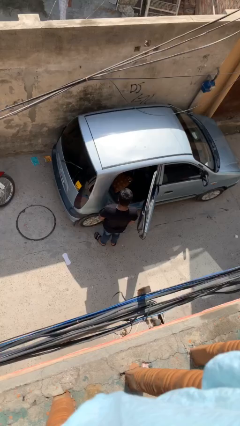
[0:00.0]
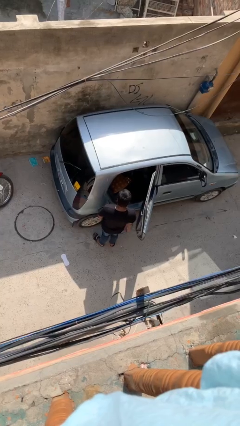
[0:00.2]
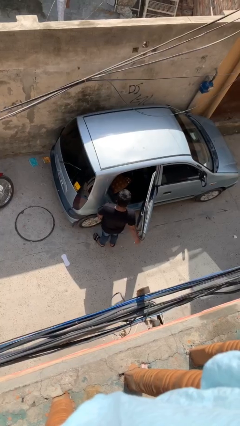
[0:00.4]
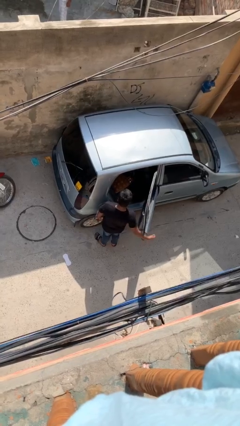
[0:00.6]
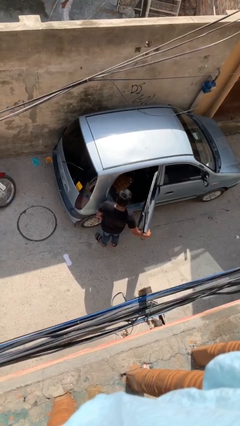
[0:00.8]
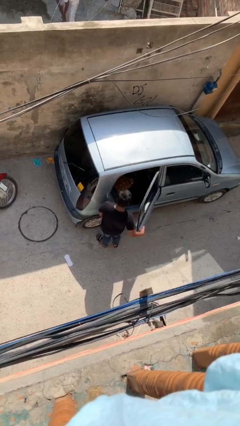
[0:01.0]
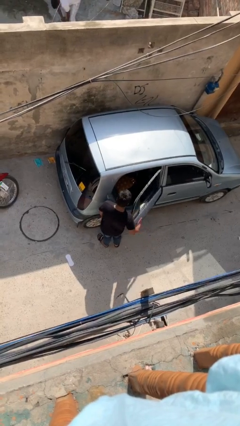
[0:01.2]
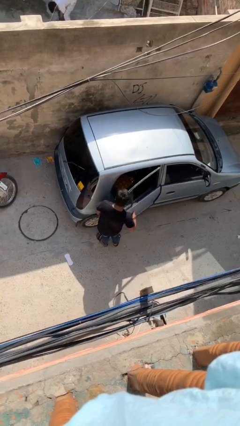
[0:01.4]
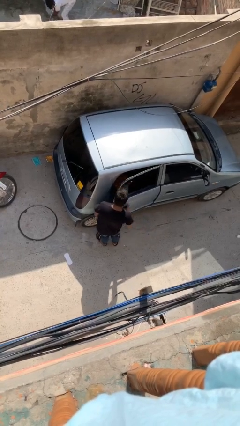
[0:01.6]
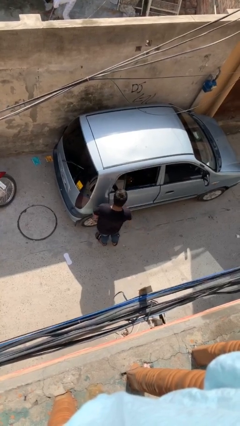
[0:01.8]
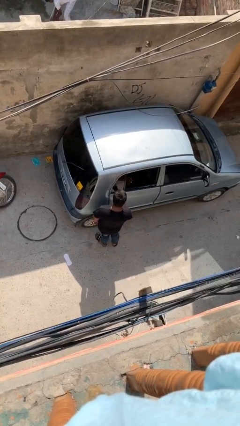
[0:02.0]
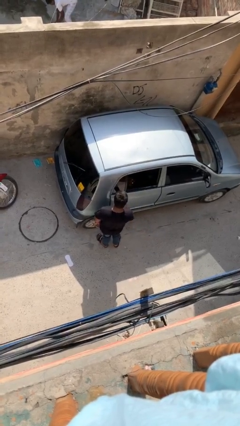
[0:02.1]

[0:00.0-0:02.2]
person closes car door

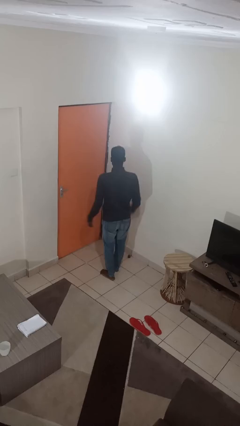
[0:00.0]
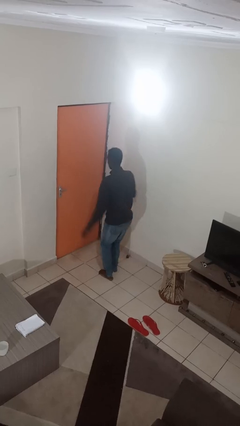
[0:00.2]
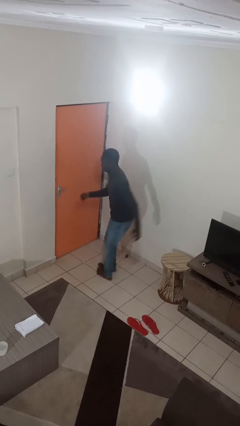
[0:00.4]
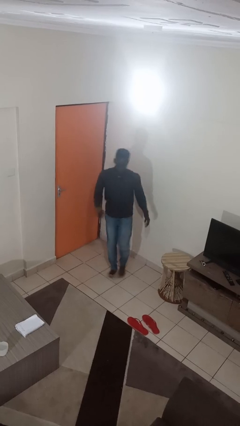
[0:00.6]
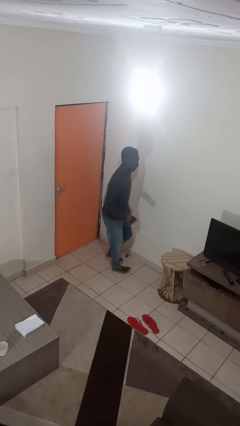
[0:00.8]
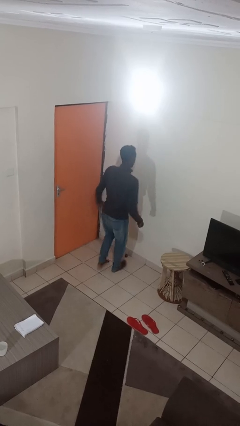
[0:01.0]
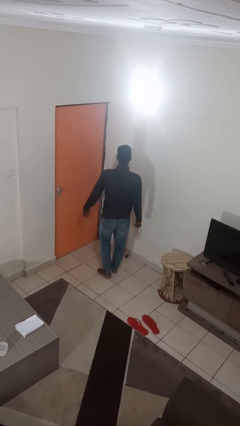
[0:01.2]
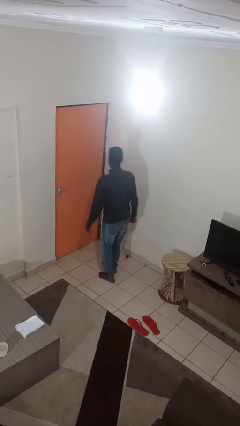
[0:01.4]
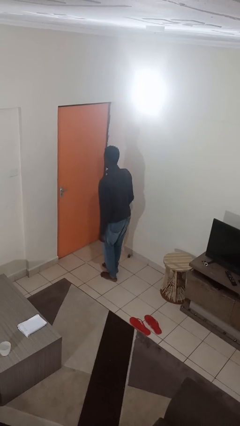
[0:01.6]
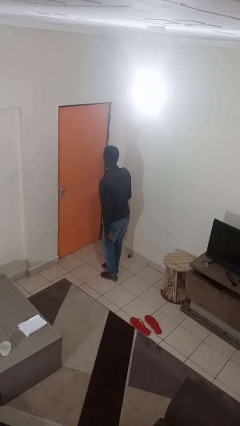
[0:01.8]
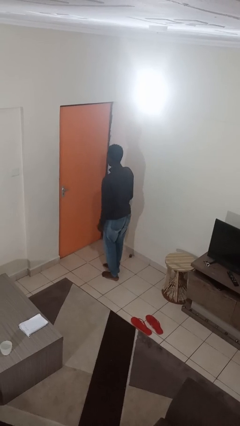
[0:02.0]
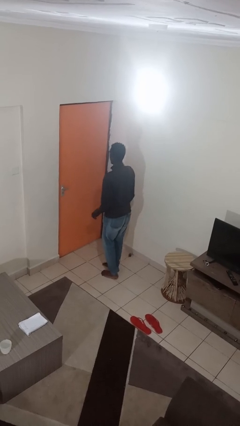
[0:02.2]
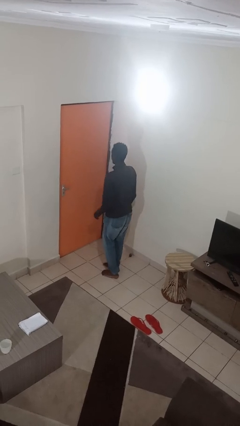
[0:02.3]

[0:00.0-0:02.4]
person twirls

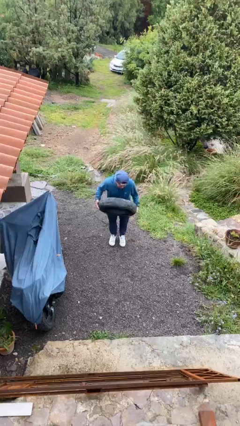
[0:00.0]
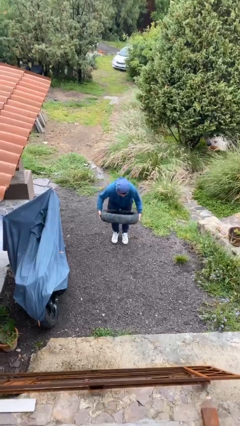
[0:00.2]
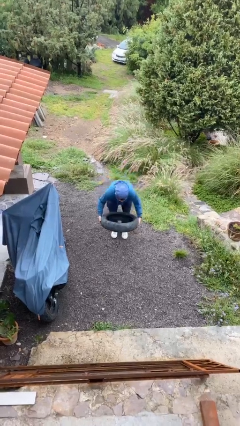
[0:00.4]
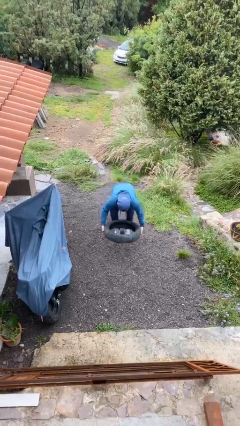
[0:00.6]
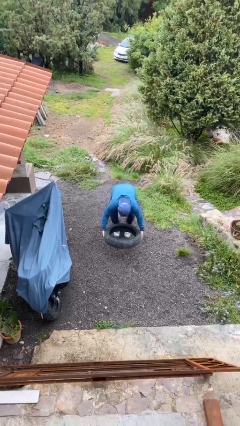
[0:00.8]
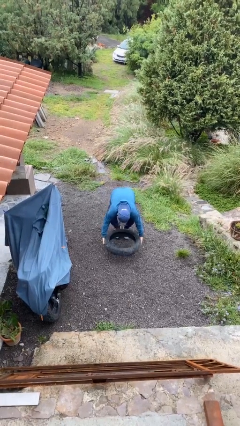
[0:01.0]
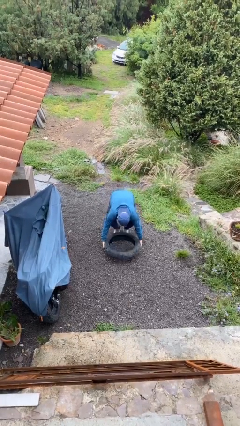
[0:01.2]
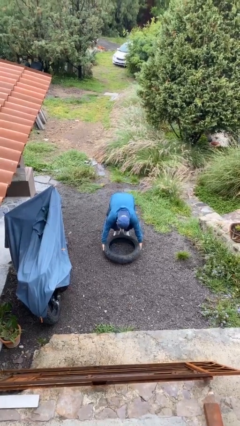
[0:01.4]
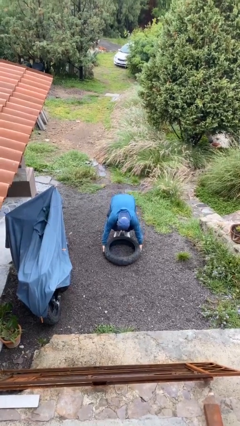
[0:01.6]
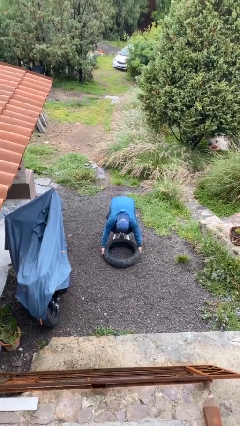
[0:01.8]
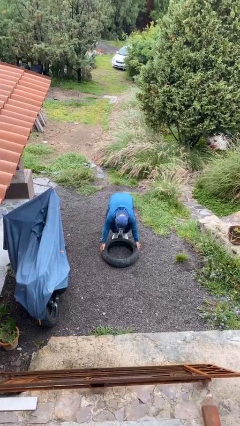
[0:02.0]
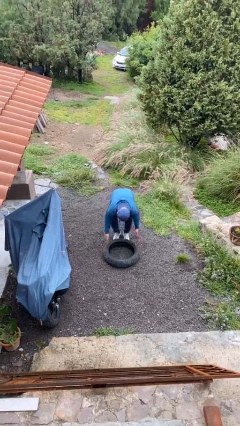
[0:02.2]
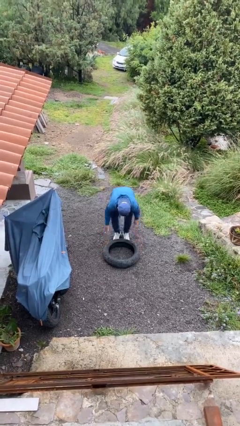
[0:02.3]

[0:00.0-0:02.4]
person puts down object on floor

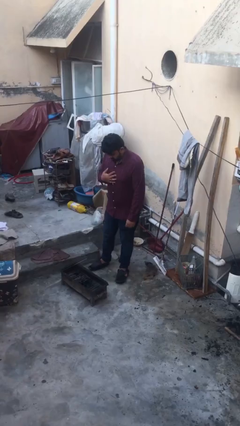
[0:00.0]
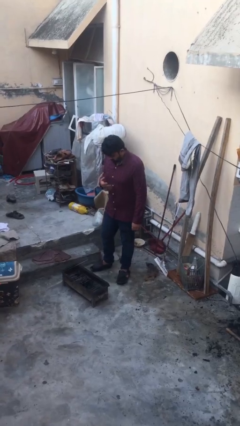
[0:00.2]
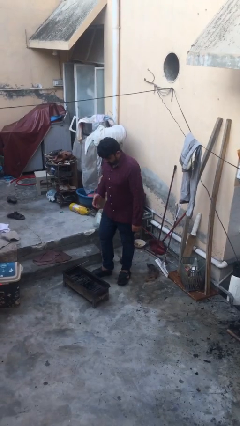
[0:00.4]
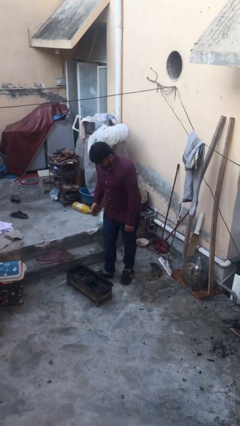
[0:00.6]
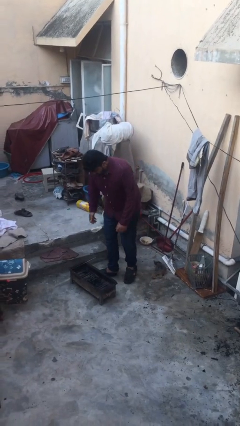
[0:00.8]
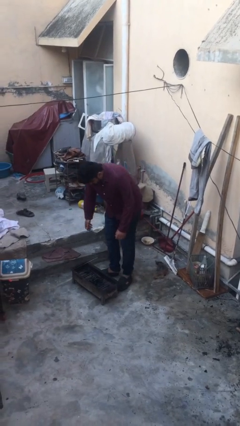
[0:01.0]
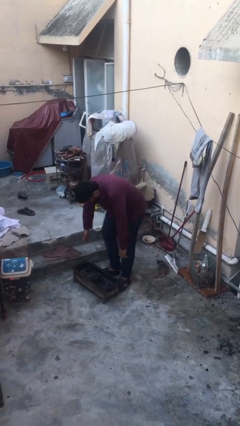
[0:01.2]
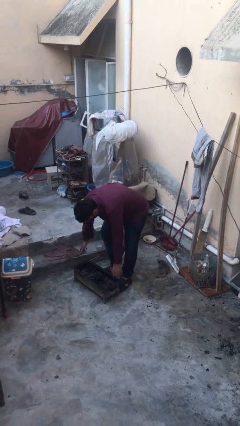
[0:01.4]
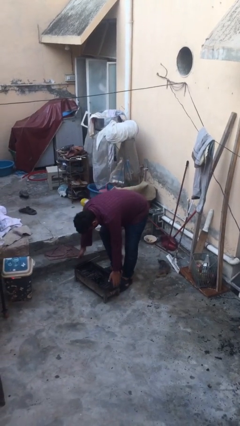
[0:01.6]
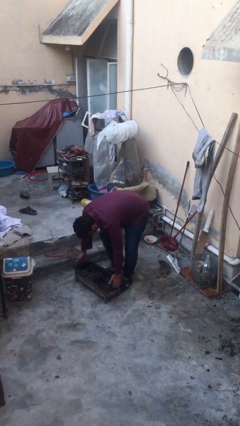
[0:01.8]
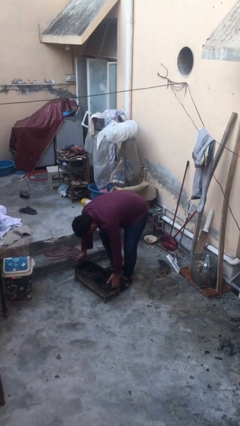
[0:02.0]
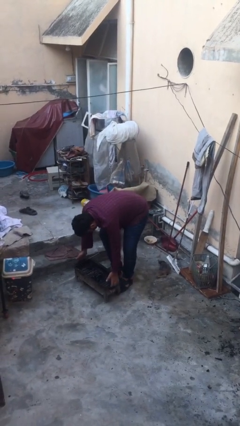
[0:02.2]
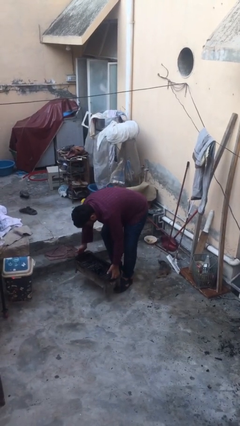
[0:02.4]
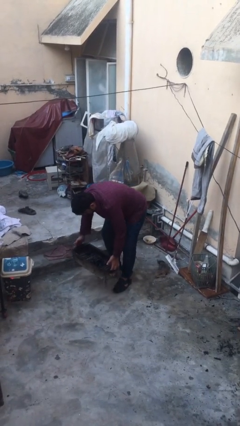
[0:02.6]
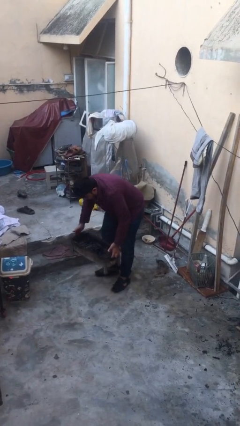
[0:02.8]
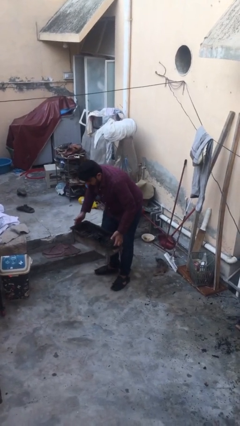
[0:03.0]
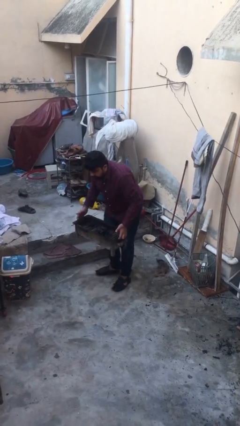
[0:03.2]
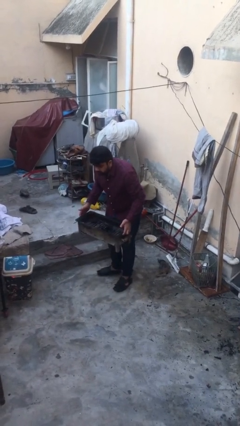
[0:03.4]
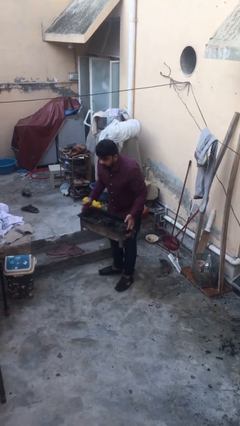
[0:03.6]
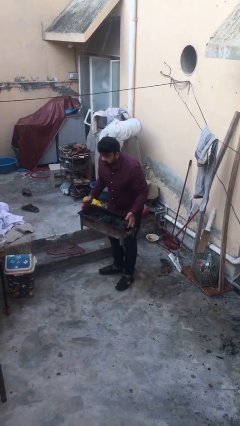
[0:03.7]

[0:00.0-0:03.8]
person picks up object from floor

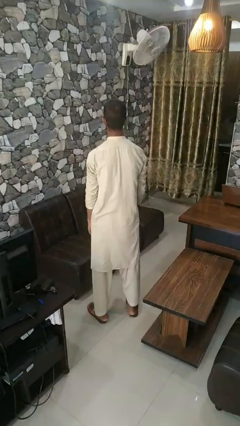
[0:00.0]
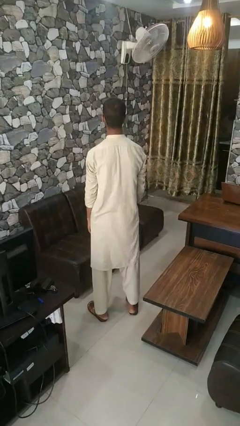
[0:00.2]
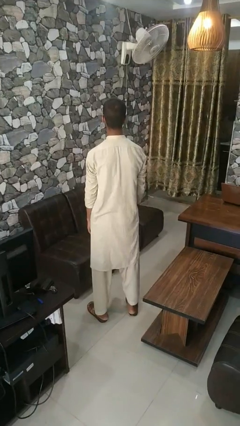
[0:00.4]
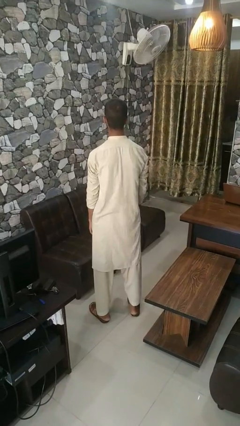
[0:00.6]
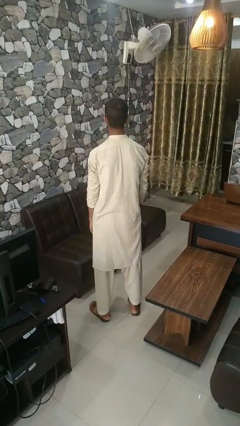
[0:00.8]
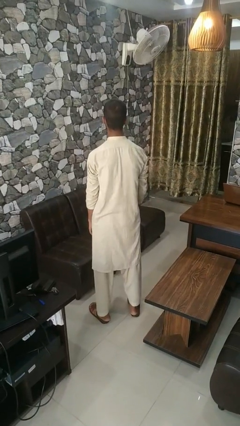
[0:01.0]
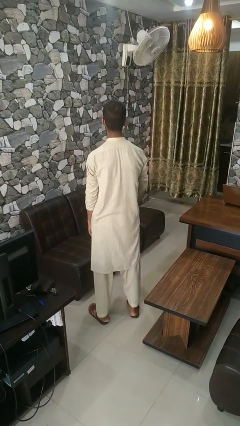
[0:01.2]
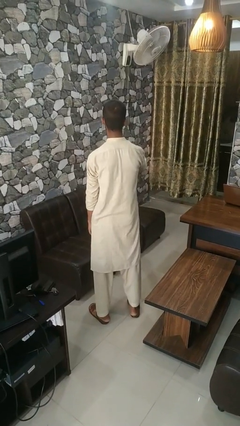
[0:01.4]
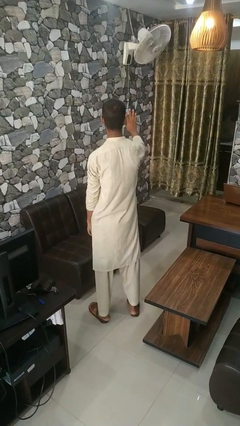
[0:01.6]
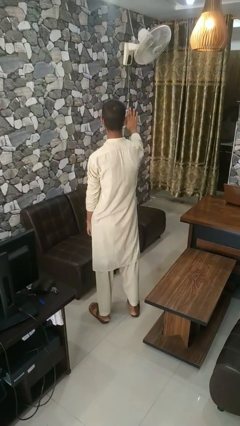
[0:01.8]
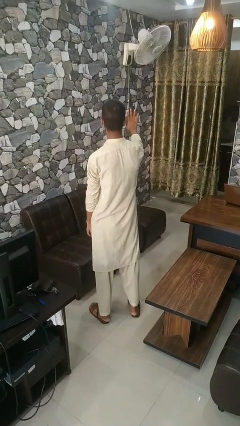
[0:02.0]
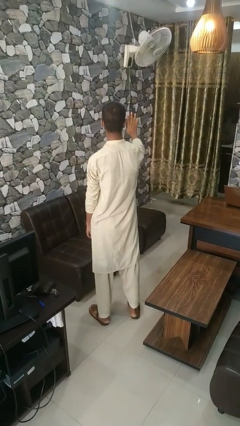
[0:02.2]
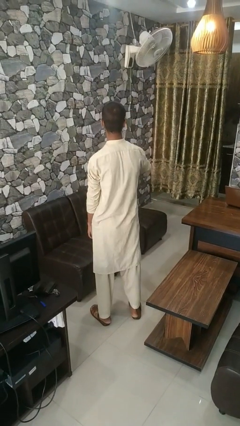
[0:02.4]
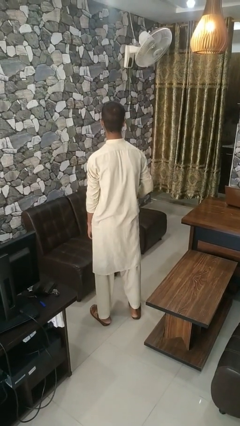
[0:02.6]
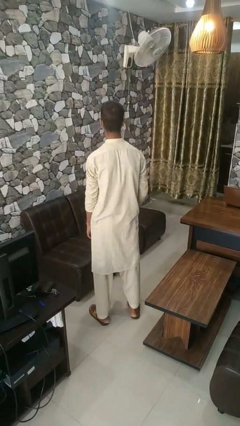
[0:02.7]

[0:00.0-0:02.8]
person gestures number four

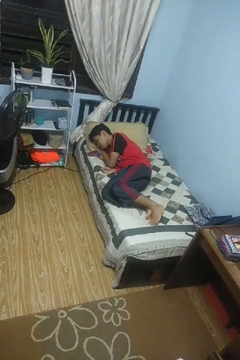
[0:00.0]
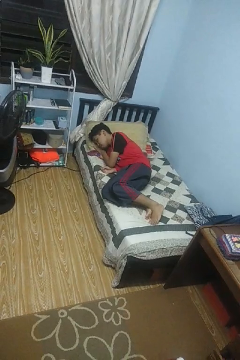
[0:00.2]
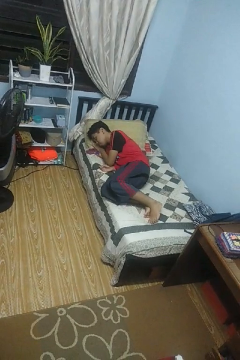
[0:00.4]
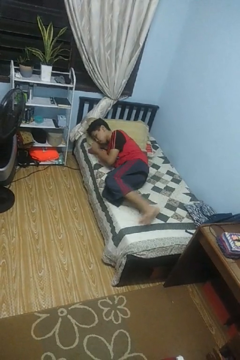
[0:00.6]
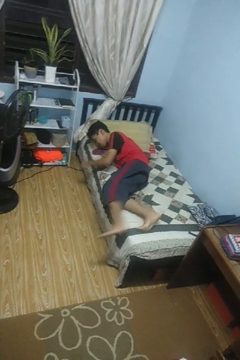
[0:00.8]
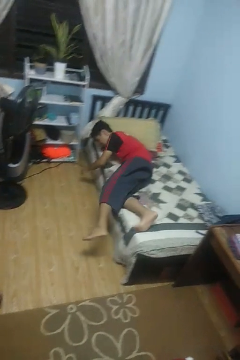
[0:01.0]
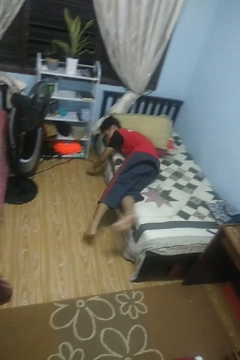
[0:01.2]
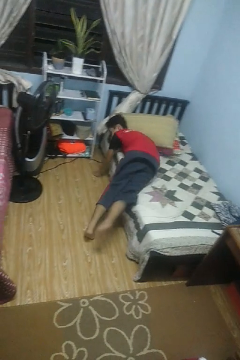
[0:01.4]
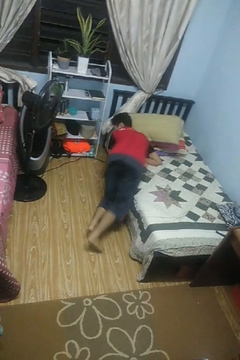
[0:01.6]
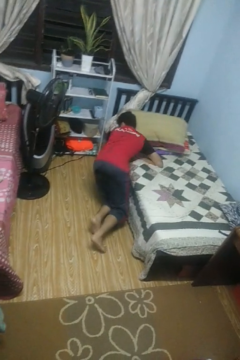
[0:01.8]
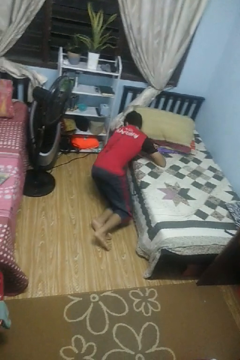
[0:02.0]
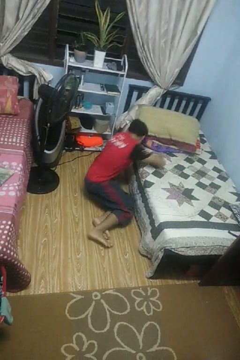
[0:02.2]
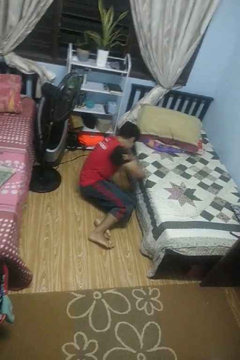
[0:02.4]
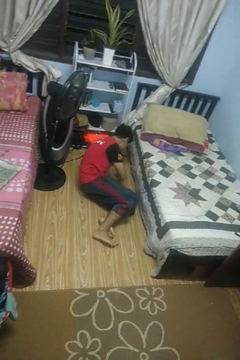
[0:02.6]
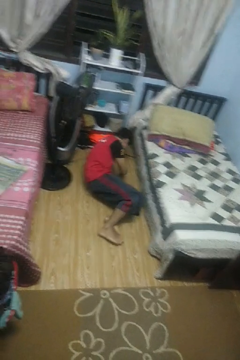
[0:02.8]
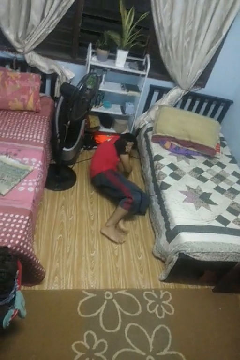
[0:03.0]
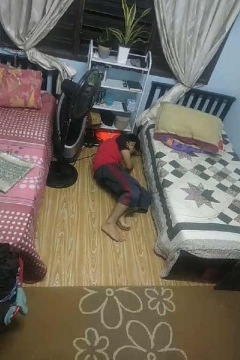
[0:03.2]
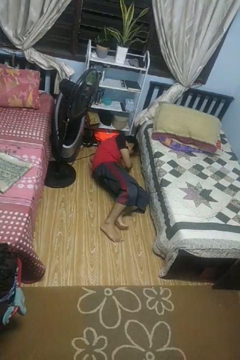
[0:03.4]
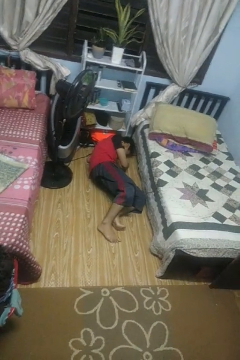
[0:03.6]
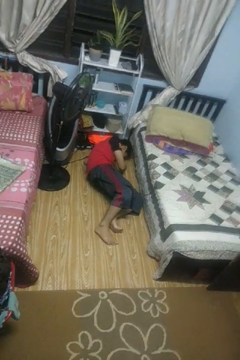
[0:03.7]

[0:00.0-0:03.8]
person falls from bed

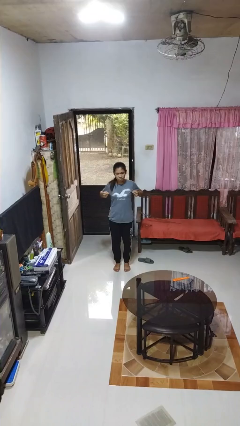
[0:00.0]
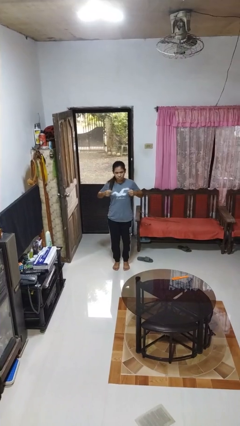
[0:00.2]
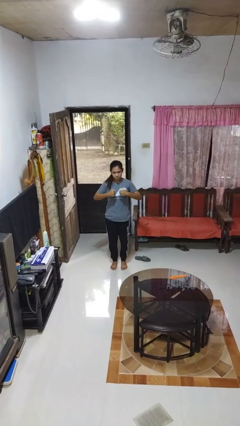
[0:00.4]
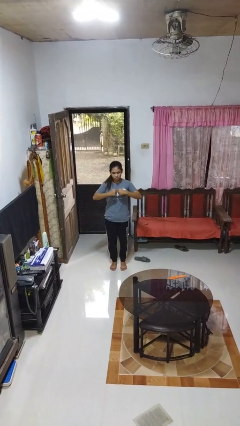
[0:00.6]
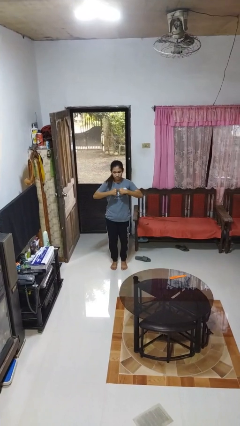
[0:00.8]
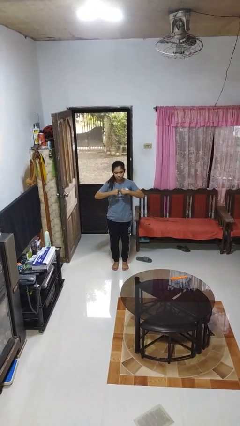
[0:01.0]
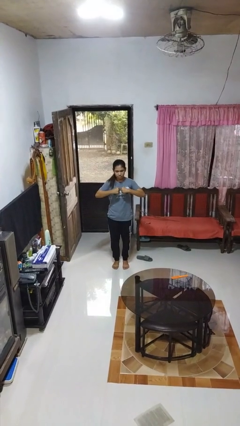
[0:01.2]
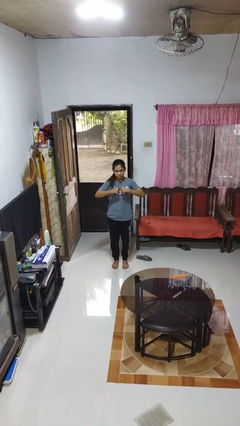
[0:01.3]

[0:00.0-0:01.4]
person gestures zoom out
